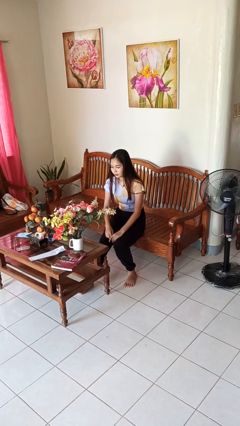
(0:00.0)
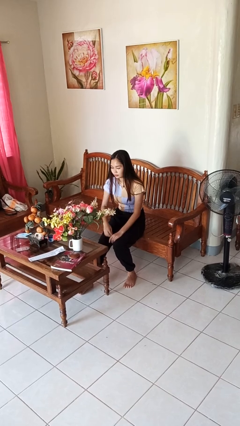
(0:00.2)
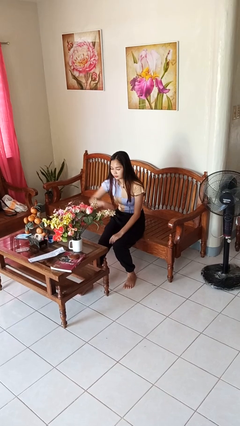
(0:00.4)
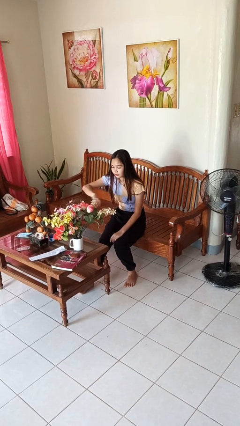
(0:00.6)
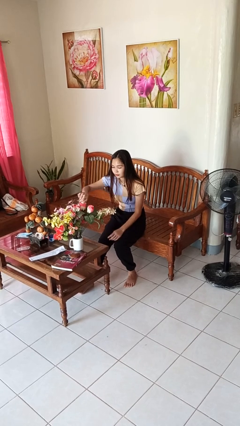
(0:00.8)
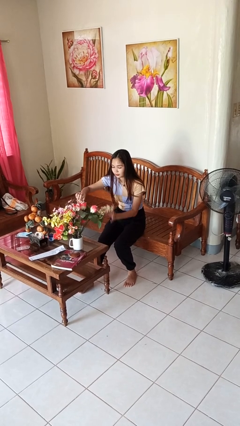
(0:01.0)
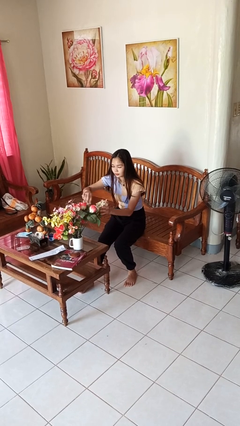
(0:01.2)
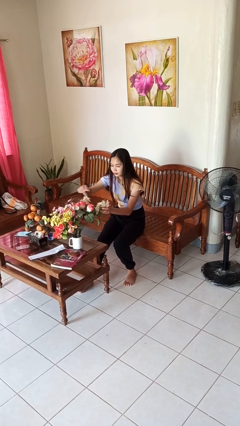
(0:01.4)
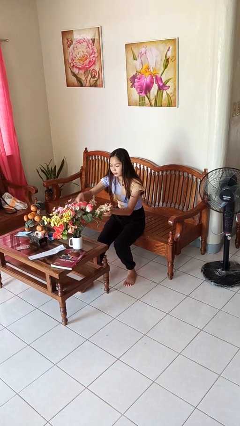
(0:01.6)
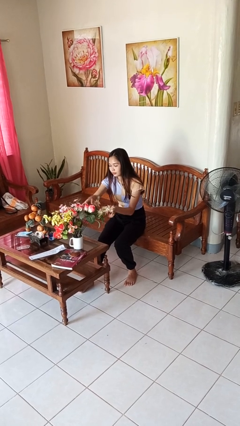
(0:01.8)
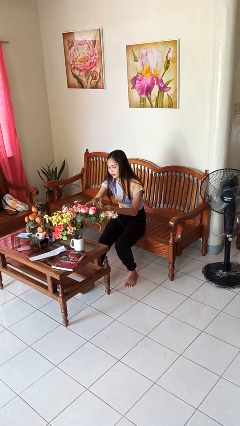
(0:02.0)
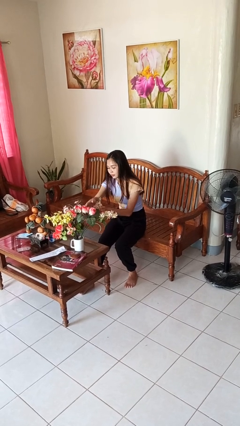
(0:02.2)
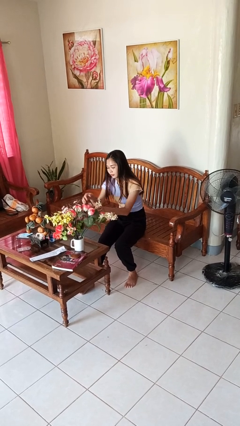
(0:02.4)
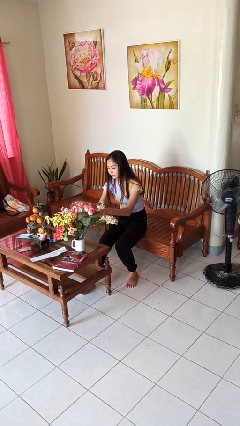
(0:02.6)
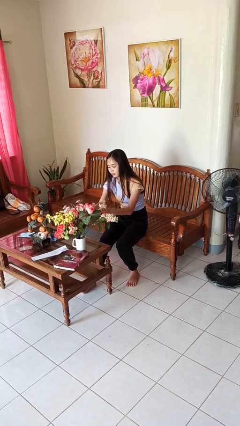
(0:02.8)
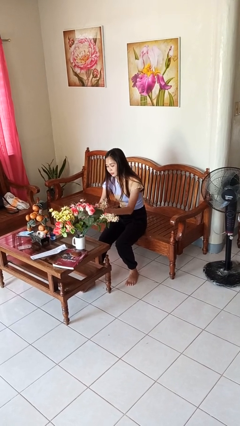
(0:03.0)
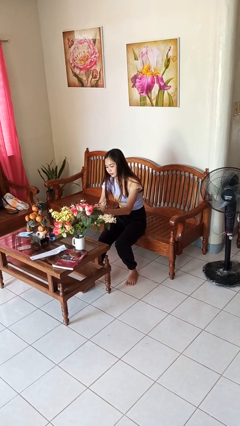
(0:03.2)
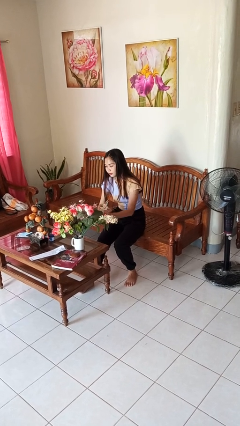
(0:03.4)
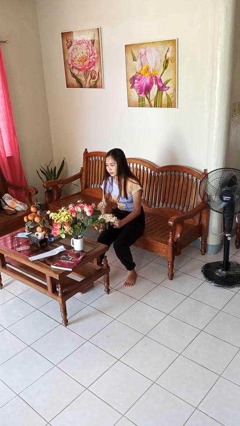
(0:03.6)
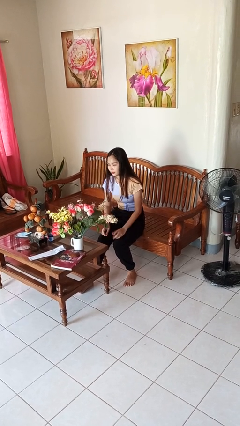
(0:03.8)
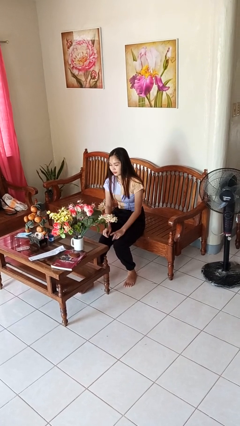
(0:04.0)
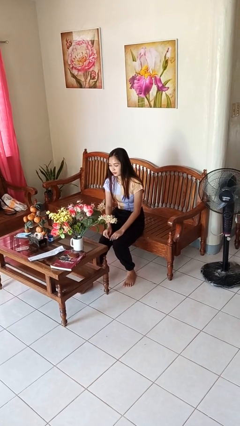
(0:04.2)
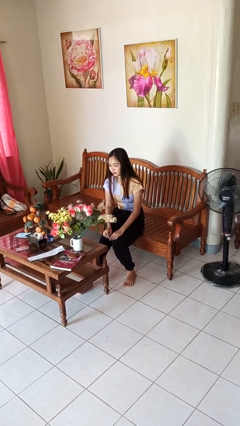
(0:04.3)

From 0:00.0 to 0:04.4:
person arranges flowers in vase

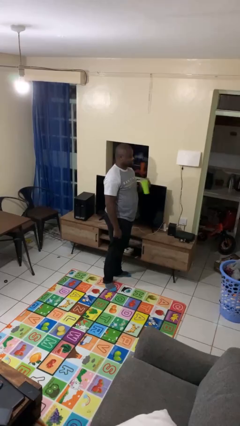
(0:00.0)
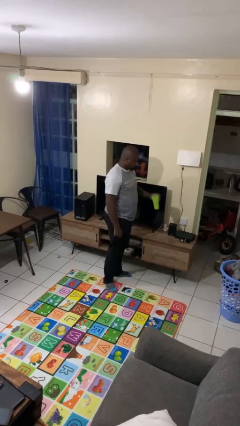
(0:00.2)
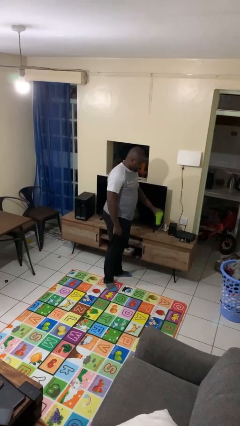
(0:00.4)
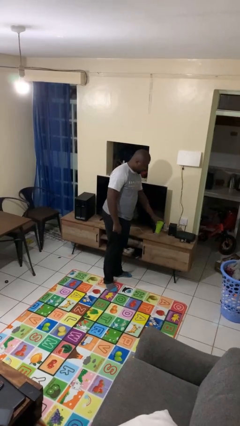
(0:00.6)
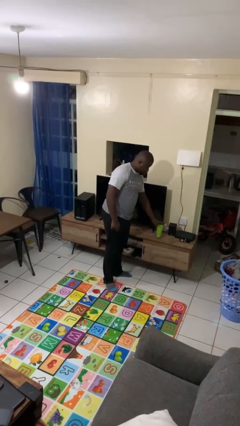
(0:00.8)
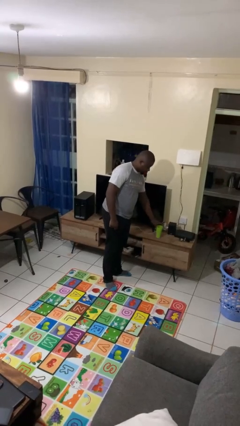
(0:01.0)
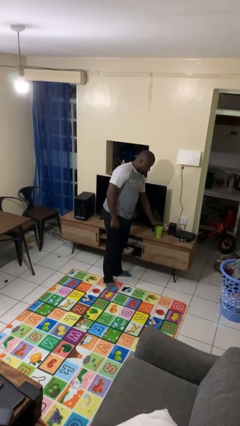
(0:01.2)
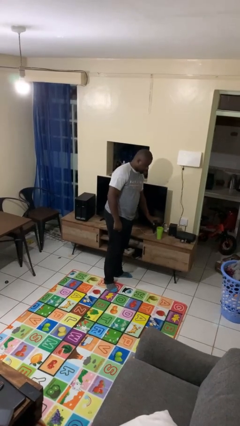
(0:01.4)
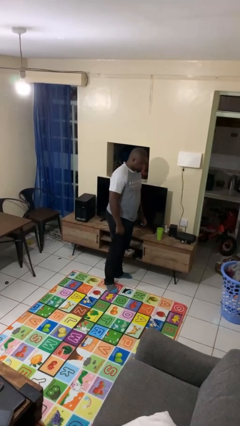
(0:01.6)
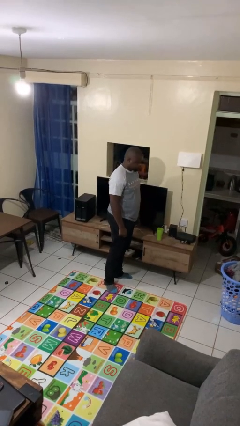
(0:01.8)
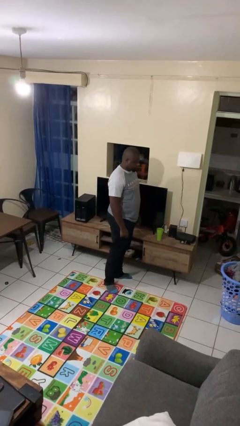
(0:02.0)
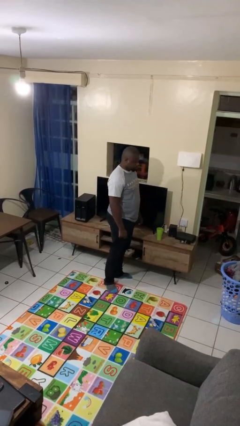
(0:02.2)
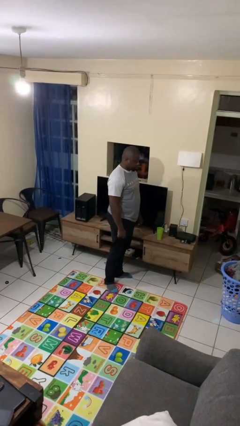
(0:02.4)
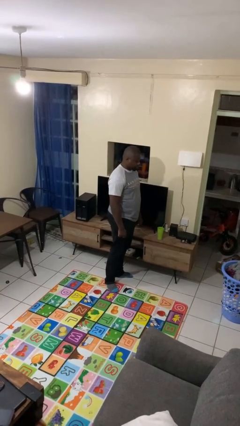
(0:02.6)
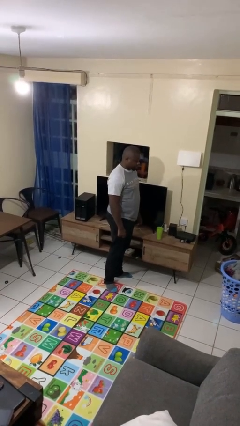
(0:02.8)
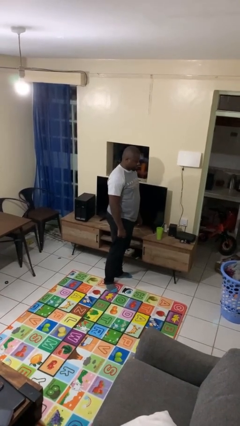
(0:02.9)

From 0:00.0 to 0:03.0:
person puts down object on countertop

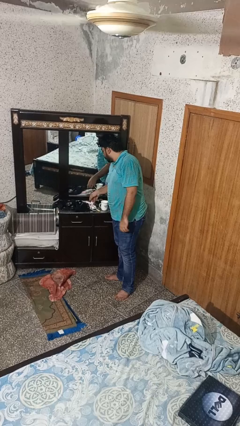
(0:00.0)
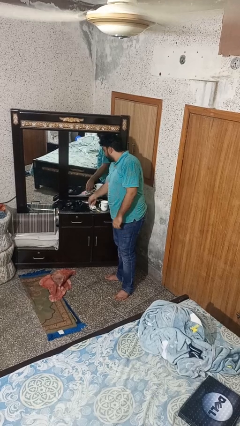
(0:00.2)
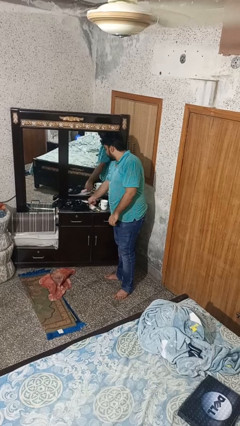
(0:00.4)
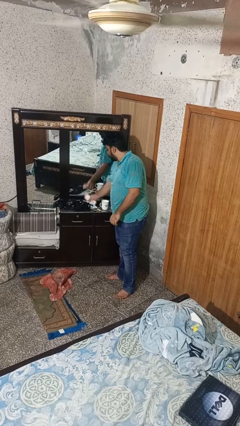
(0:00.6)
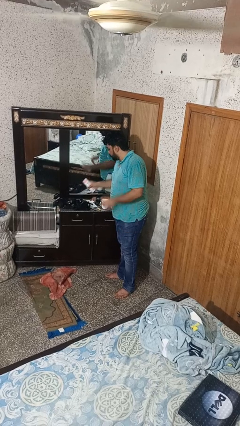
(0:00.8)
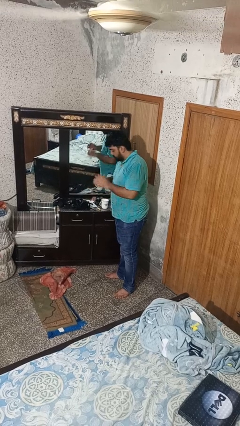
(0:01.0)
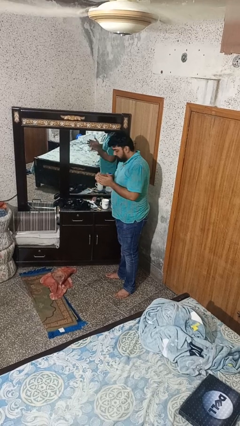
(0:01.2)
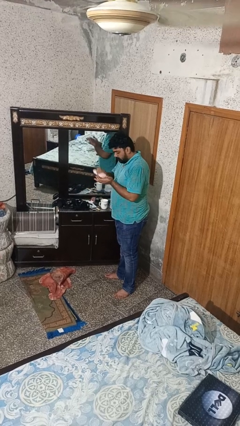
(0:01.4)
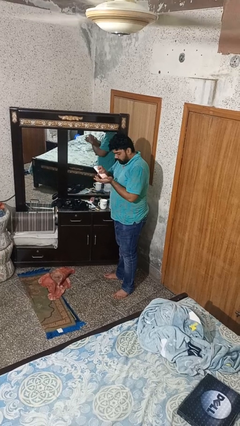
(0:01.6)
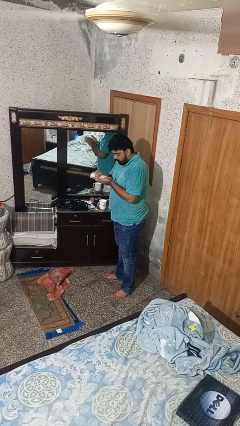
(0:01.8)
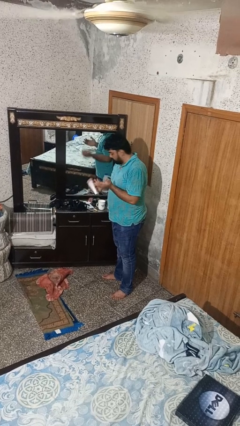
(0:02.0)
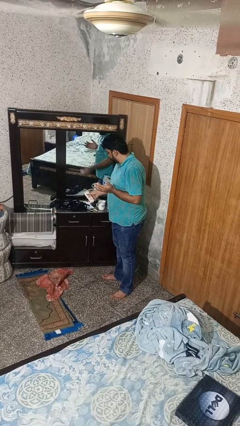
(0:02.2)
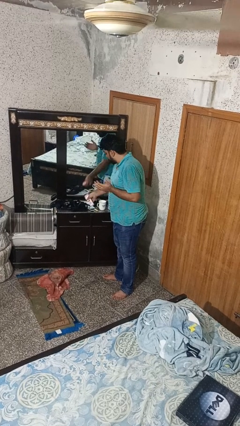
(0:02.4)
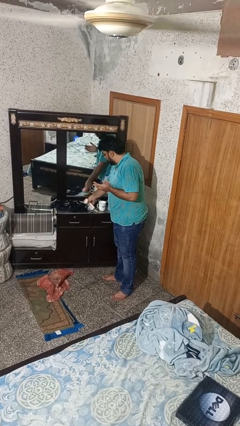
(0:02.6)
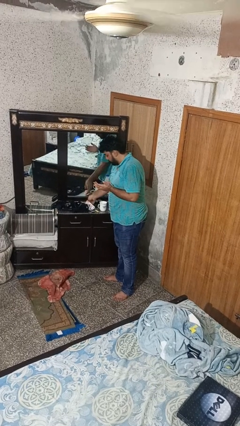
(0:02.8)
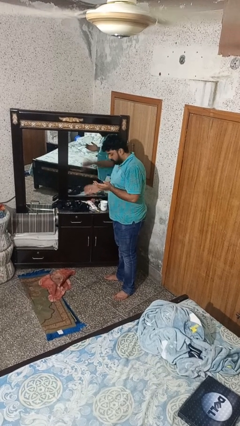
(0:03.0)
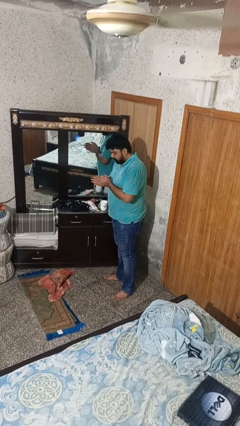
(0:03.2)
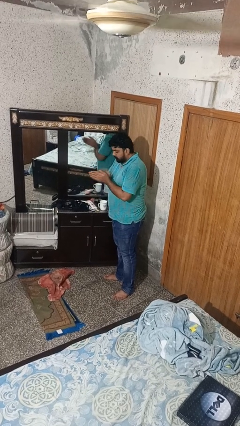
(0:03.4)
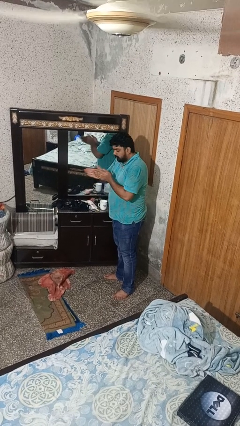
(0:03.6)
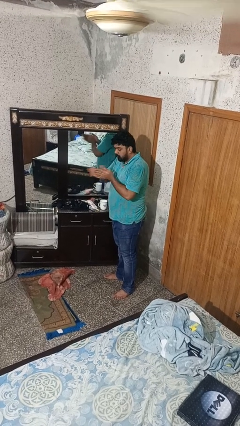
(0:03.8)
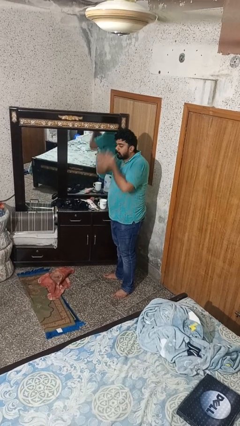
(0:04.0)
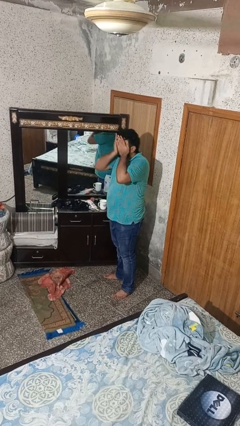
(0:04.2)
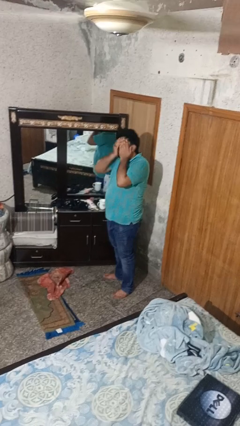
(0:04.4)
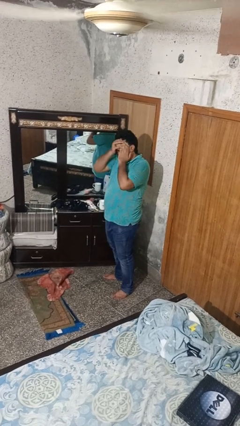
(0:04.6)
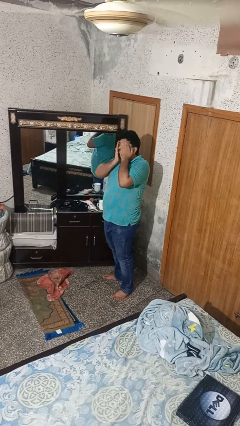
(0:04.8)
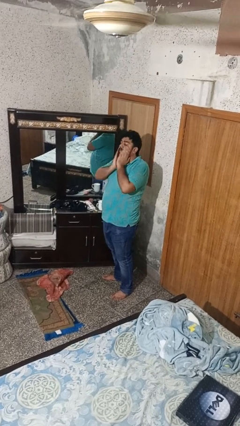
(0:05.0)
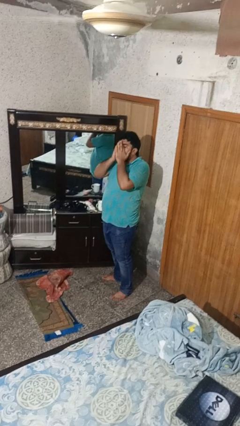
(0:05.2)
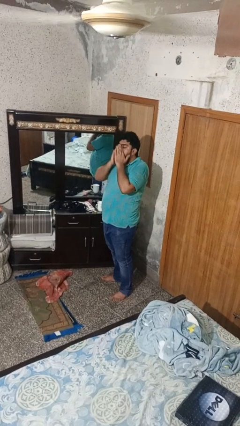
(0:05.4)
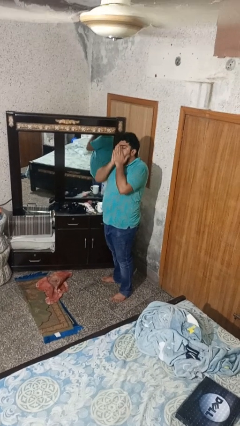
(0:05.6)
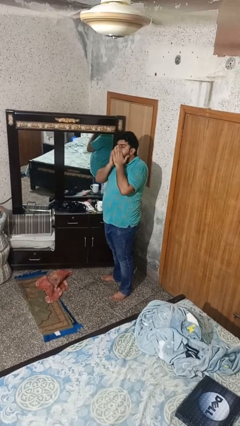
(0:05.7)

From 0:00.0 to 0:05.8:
person applies facial moisturizer

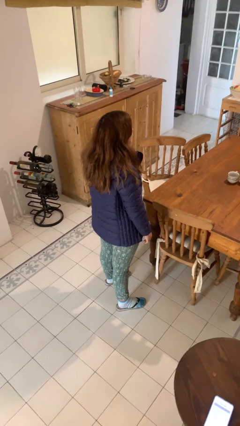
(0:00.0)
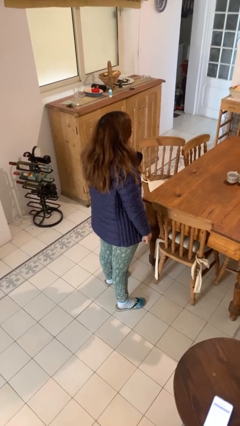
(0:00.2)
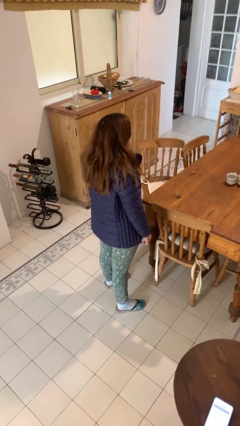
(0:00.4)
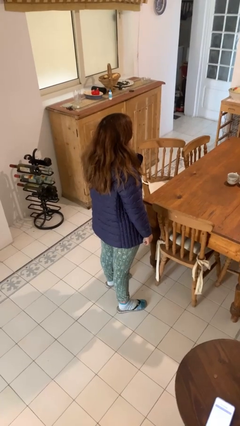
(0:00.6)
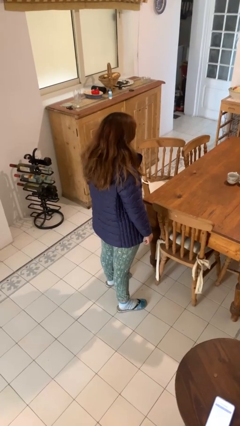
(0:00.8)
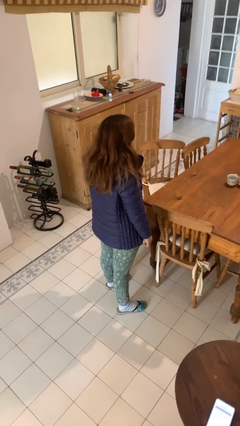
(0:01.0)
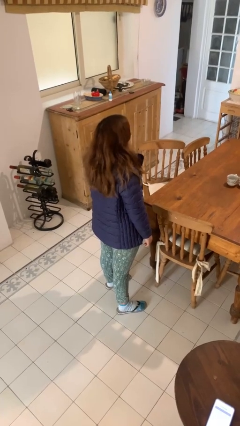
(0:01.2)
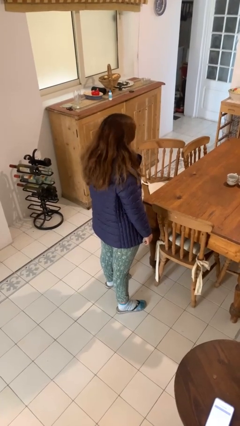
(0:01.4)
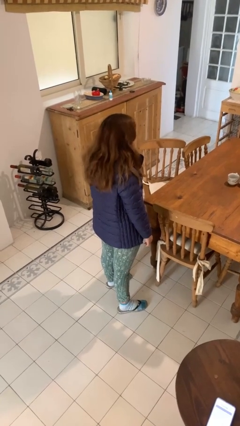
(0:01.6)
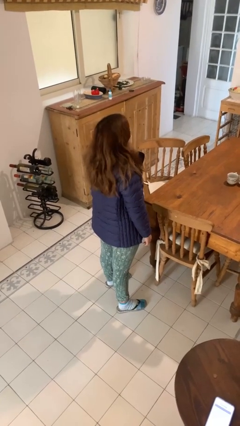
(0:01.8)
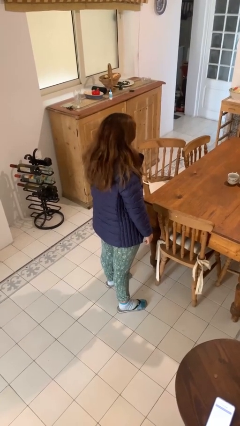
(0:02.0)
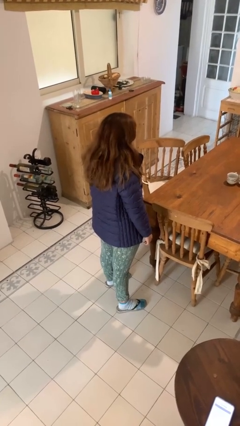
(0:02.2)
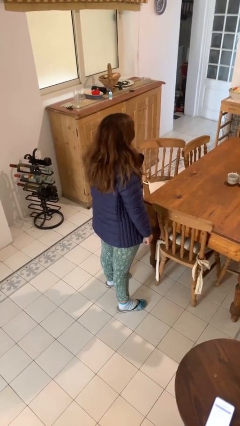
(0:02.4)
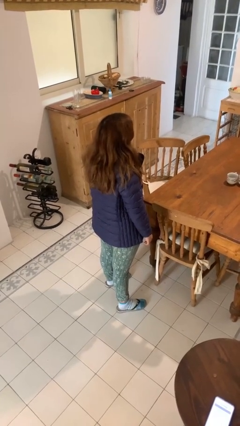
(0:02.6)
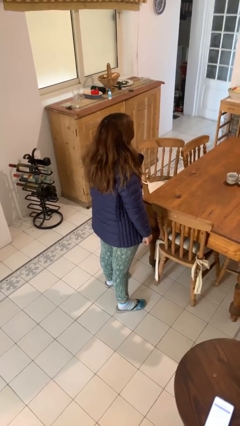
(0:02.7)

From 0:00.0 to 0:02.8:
person nods head

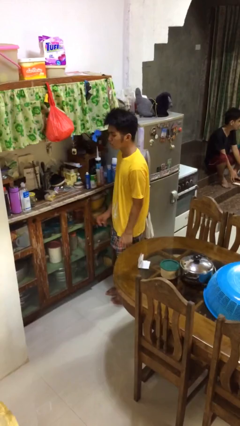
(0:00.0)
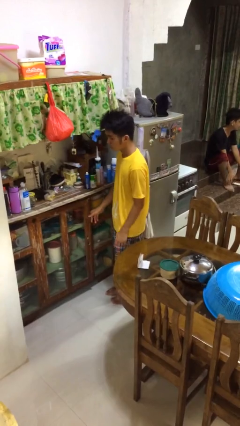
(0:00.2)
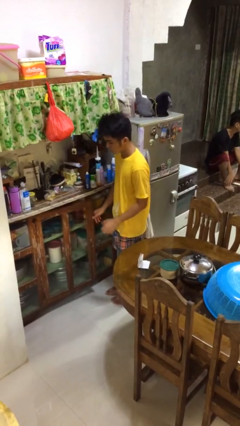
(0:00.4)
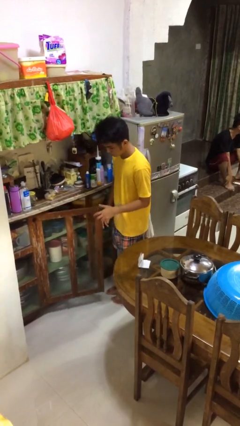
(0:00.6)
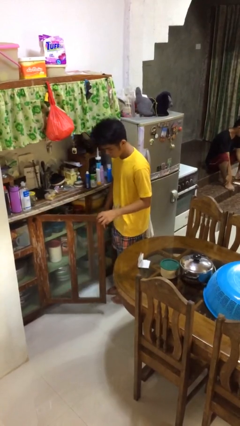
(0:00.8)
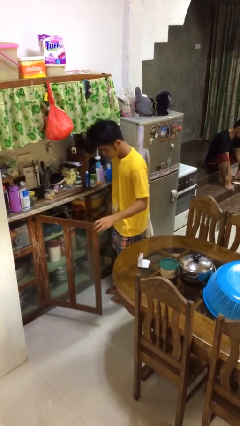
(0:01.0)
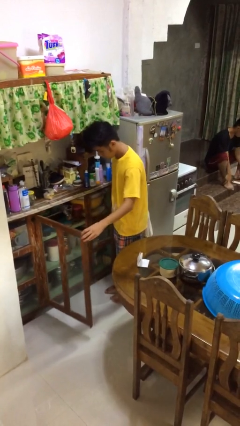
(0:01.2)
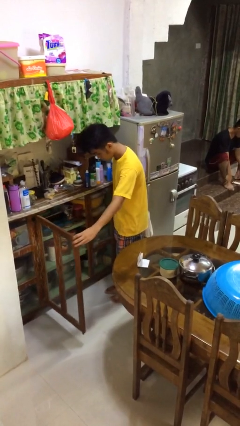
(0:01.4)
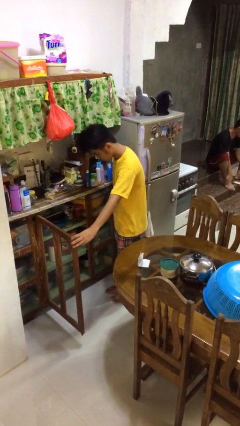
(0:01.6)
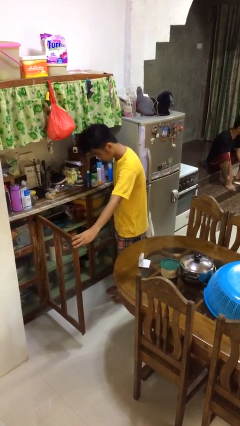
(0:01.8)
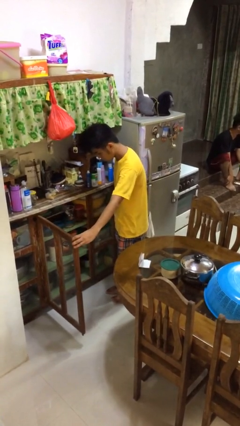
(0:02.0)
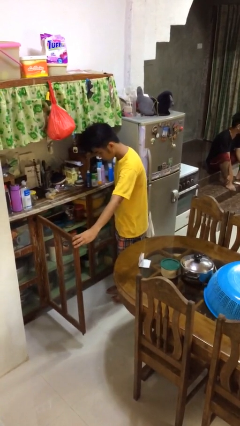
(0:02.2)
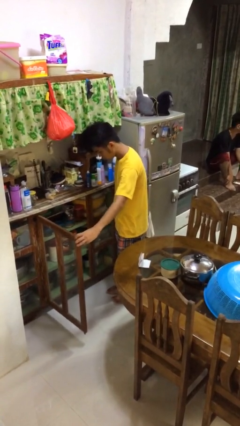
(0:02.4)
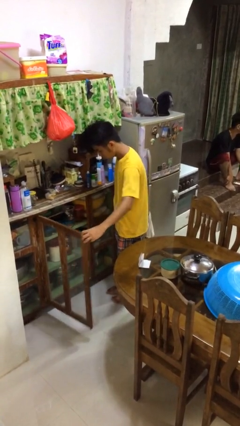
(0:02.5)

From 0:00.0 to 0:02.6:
person opens cabinet
